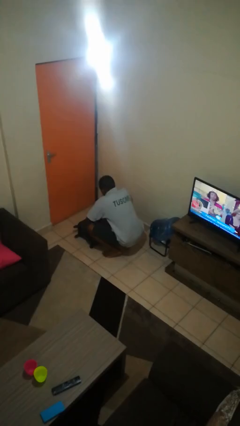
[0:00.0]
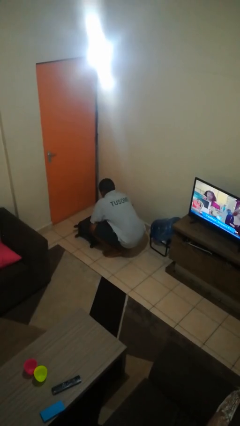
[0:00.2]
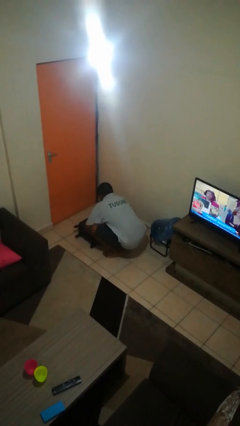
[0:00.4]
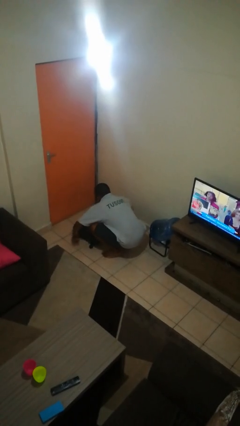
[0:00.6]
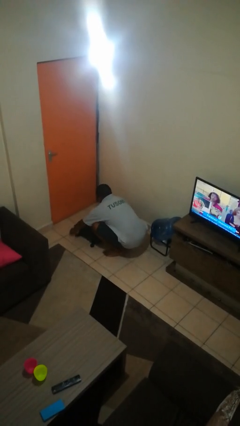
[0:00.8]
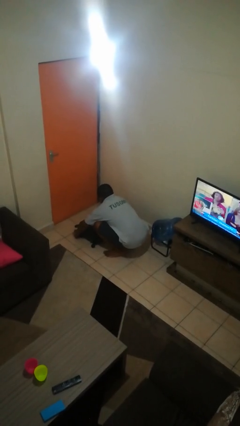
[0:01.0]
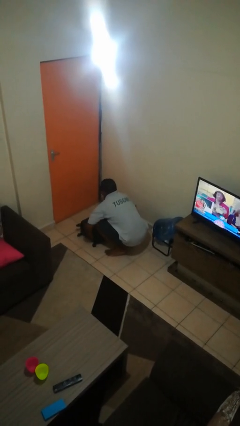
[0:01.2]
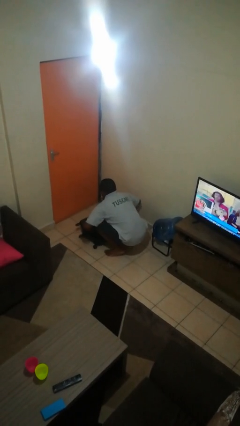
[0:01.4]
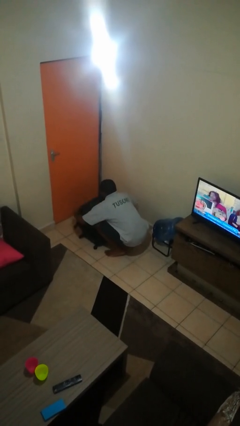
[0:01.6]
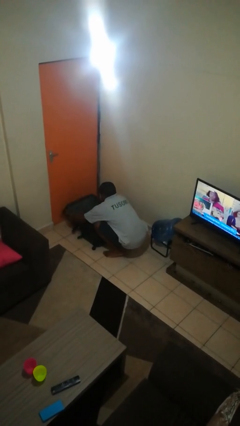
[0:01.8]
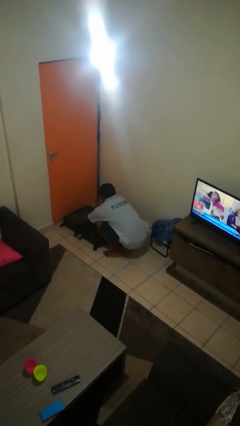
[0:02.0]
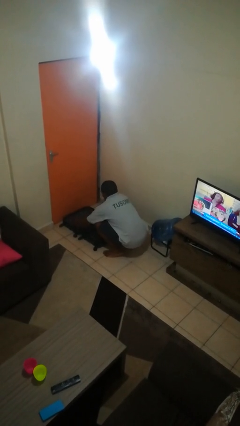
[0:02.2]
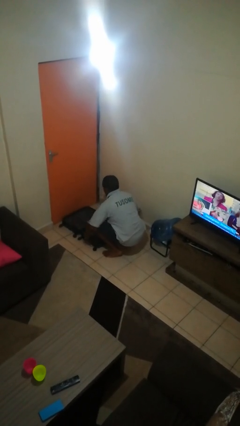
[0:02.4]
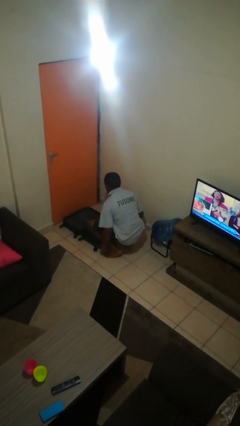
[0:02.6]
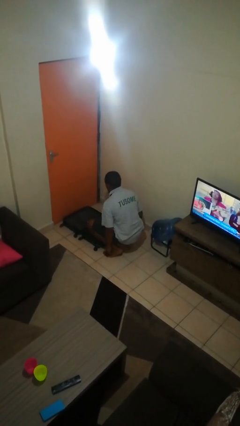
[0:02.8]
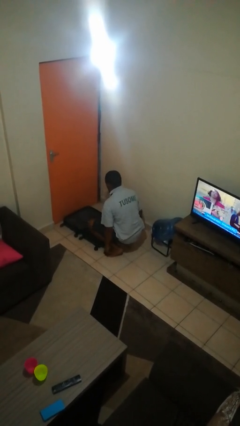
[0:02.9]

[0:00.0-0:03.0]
person opens suitcase

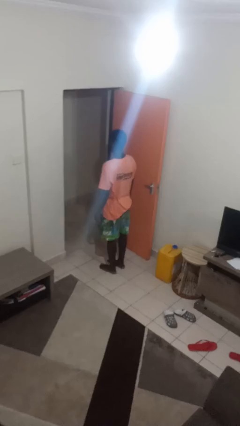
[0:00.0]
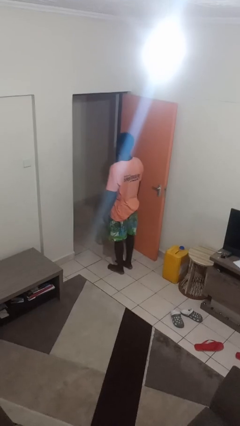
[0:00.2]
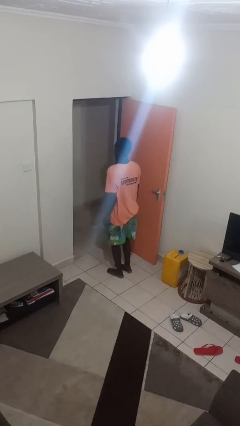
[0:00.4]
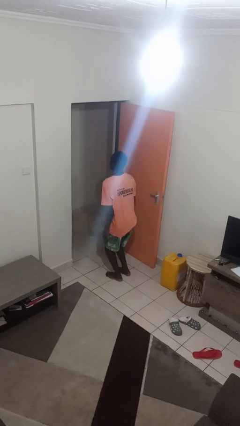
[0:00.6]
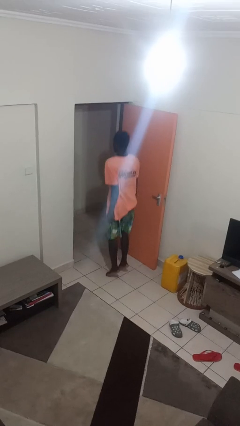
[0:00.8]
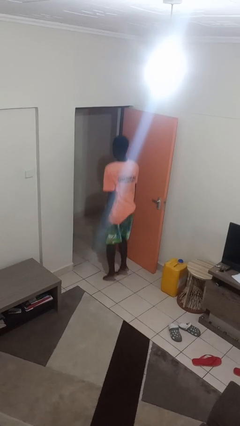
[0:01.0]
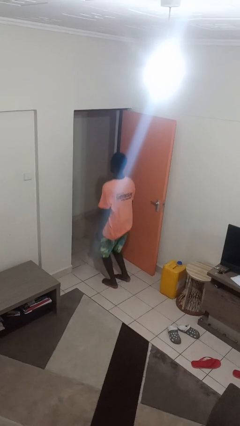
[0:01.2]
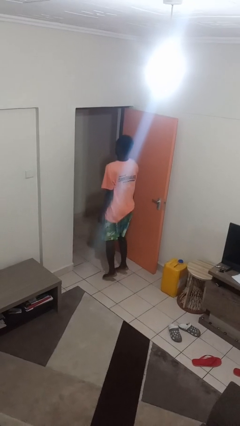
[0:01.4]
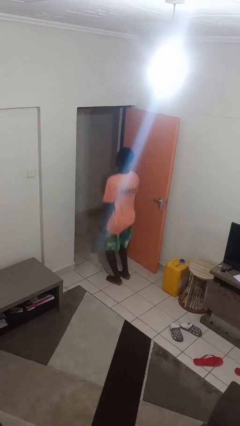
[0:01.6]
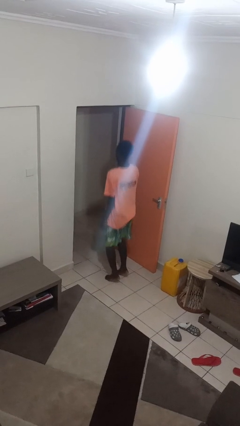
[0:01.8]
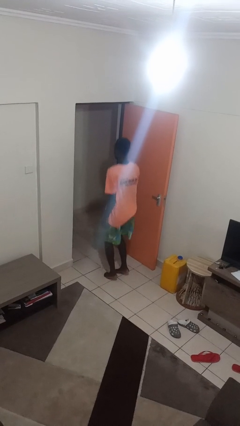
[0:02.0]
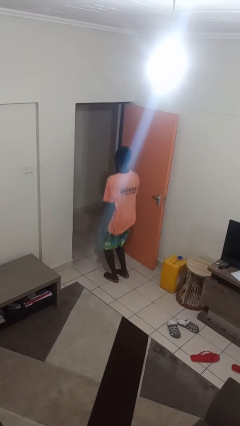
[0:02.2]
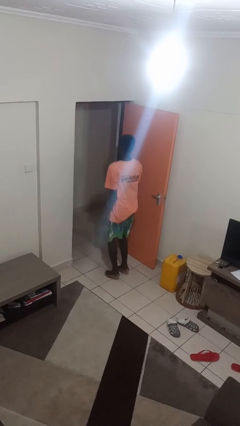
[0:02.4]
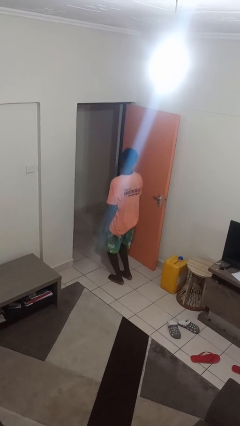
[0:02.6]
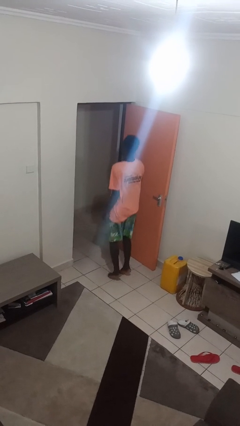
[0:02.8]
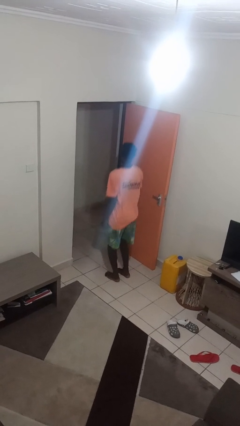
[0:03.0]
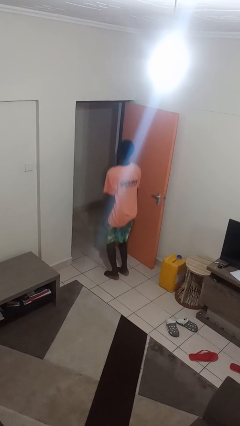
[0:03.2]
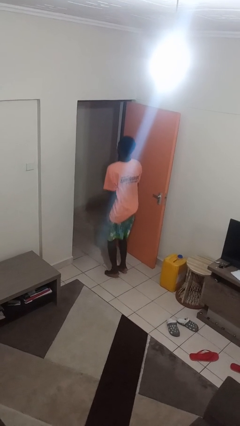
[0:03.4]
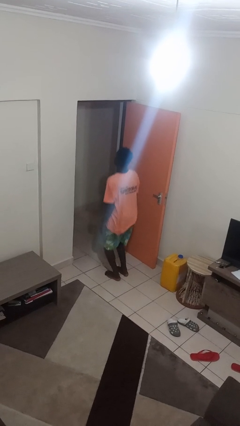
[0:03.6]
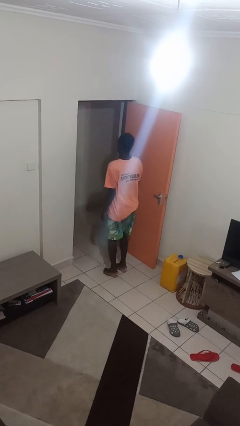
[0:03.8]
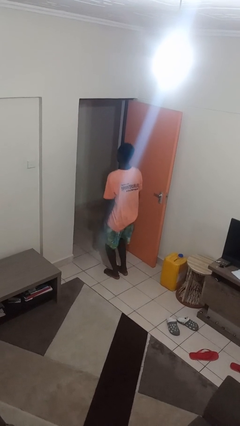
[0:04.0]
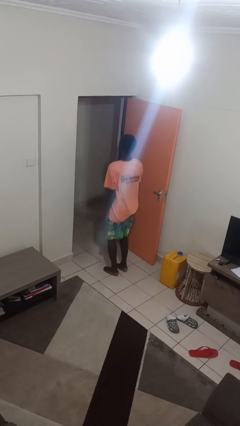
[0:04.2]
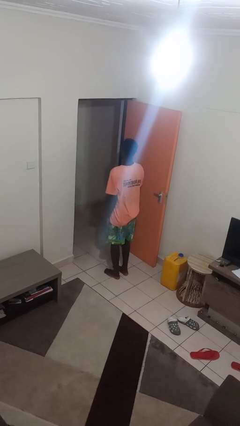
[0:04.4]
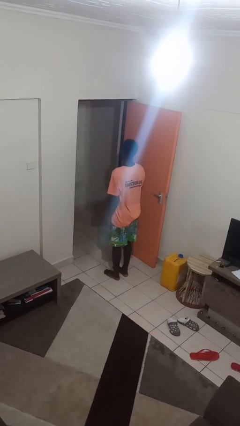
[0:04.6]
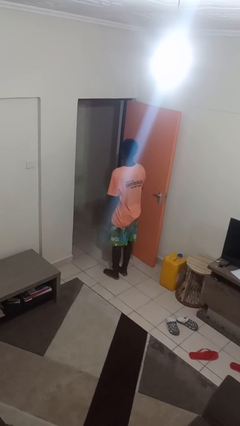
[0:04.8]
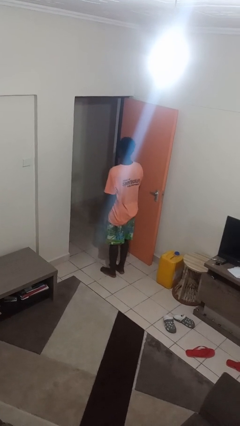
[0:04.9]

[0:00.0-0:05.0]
person jumps

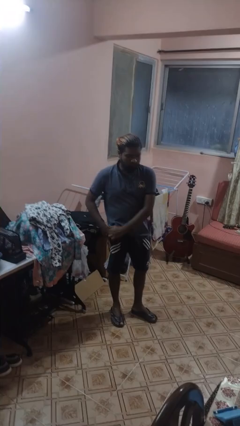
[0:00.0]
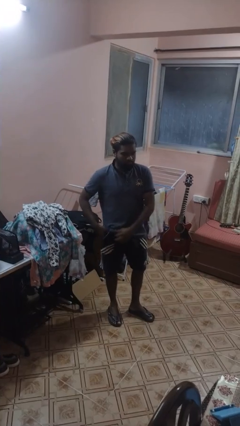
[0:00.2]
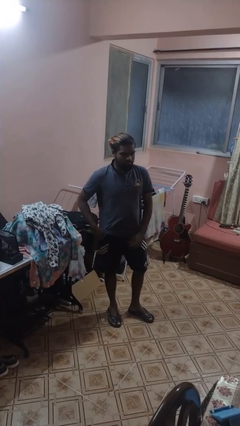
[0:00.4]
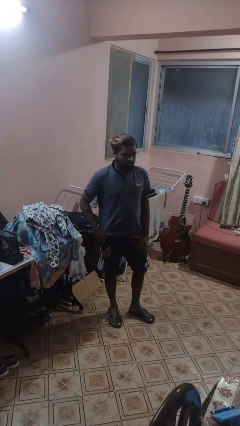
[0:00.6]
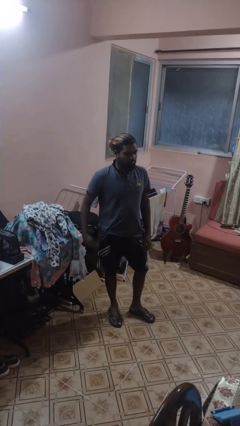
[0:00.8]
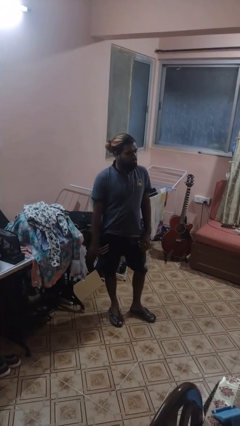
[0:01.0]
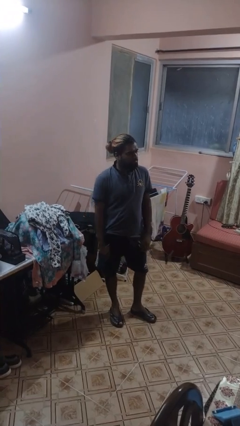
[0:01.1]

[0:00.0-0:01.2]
person puts phone into pocket

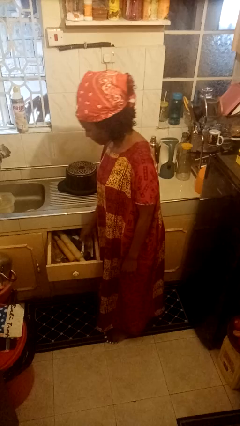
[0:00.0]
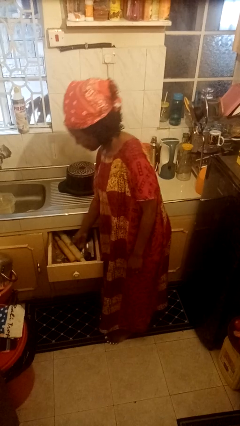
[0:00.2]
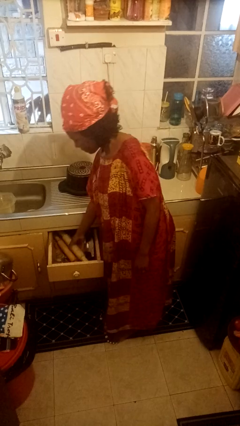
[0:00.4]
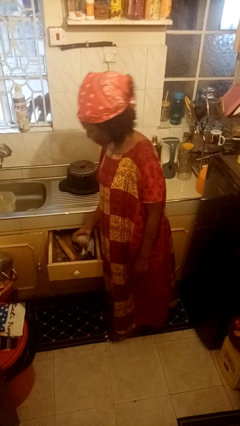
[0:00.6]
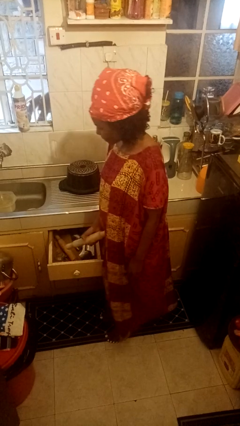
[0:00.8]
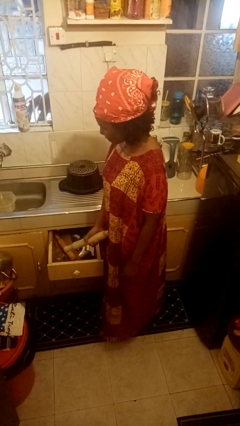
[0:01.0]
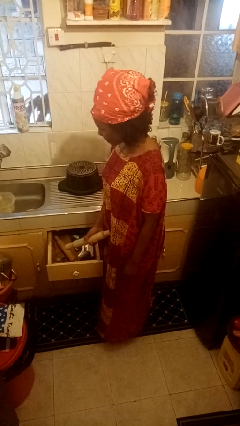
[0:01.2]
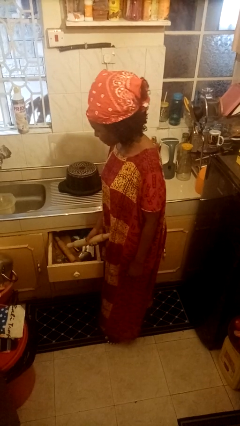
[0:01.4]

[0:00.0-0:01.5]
person takes object from kitchen drawer

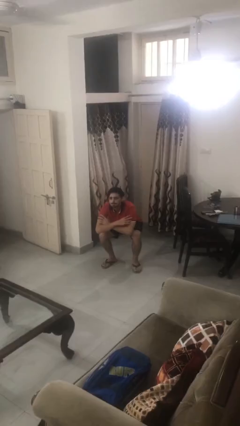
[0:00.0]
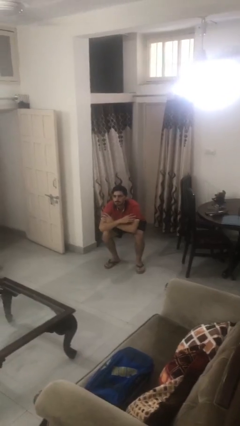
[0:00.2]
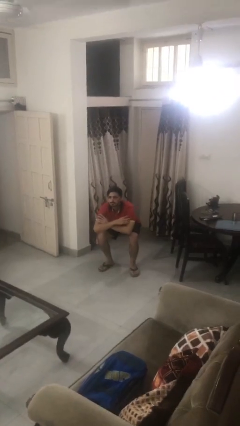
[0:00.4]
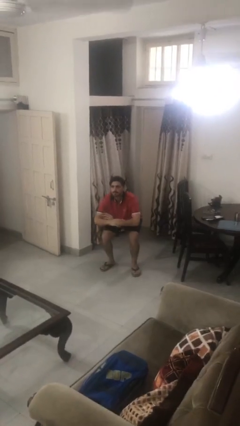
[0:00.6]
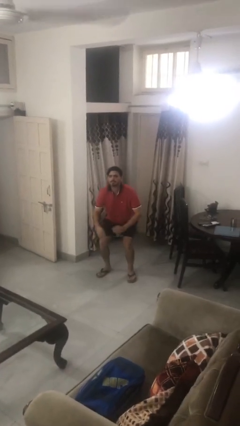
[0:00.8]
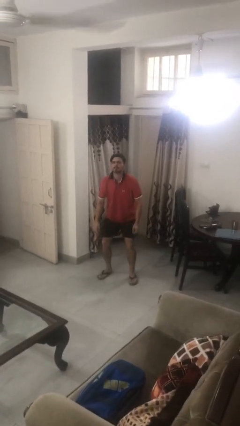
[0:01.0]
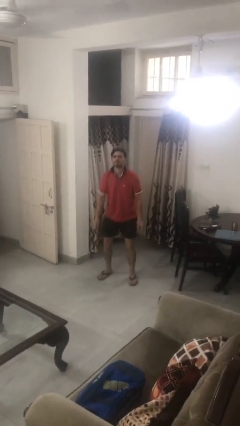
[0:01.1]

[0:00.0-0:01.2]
person stands up

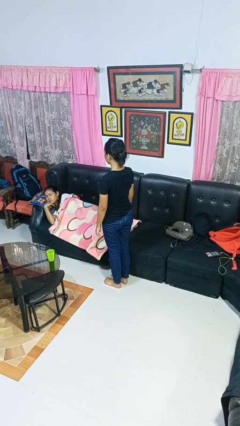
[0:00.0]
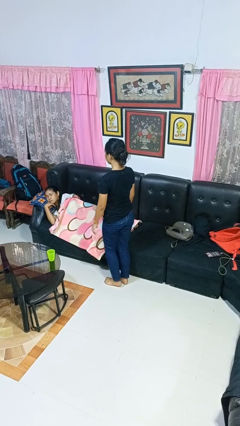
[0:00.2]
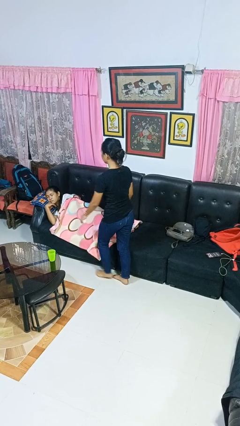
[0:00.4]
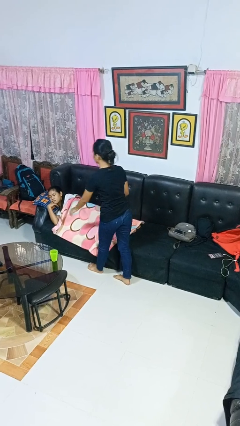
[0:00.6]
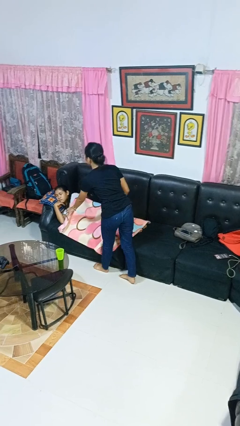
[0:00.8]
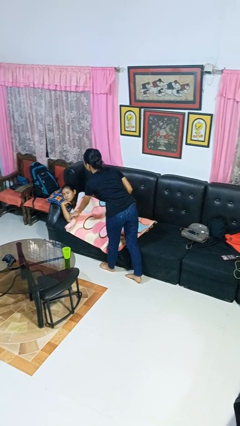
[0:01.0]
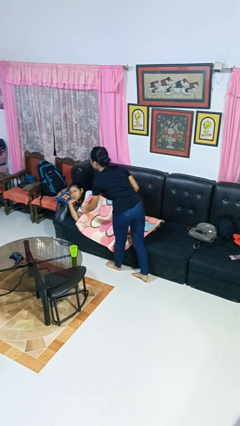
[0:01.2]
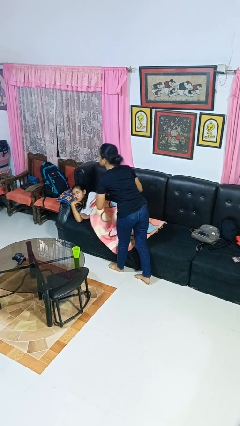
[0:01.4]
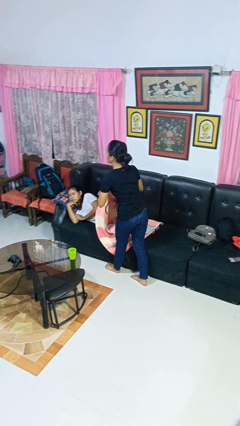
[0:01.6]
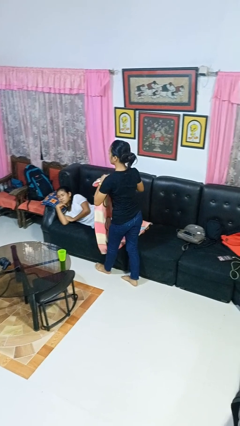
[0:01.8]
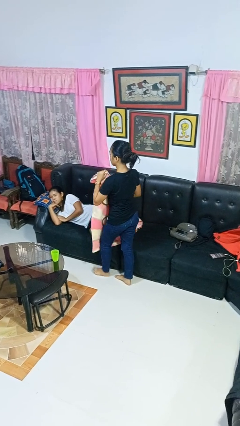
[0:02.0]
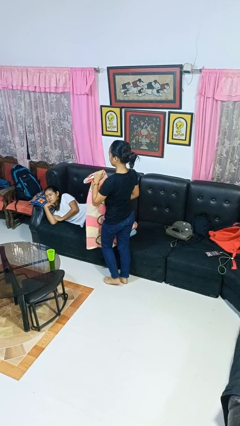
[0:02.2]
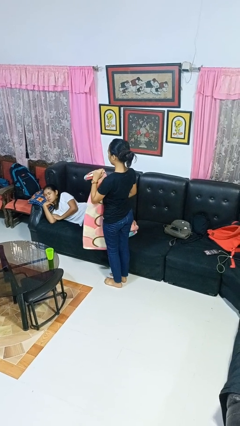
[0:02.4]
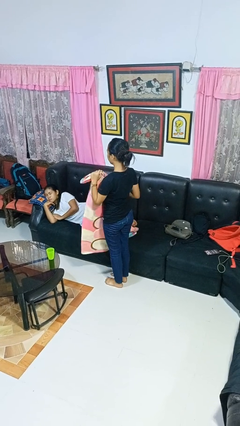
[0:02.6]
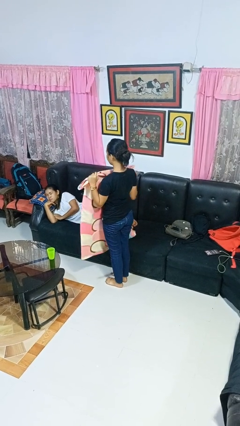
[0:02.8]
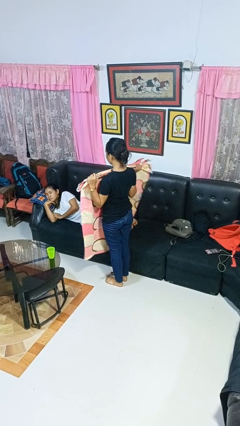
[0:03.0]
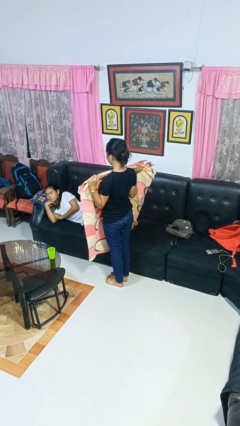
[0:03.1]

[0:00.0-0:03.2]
person uncovers friend with blanket

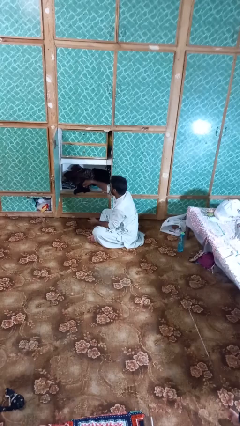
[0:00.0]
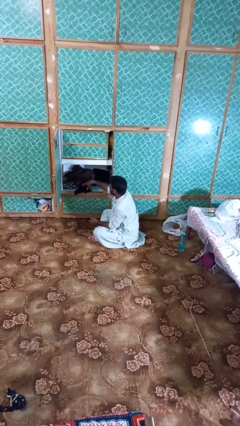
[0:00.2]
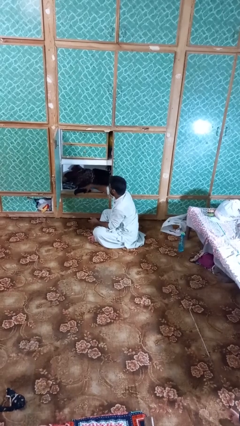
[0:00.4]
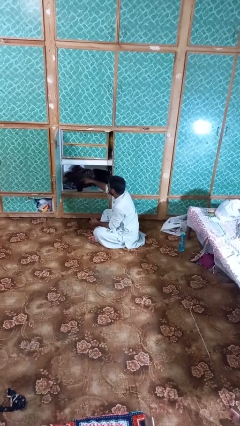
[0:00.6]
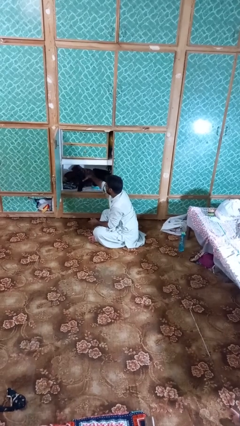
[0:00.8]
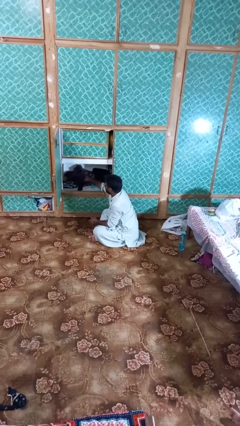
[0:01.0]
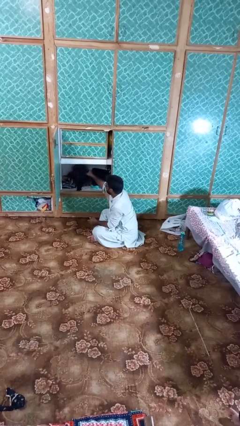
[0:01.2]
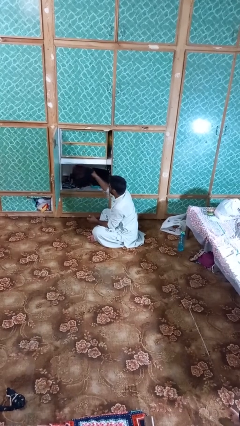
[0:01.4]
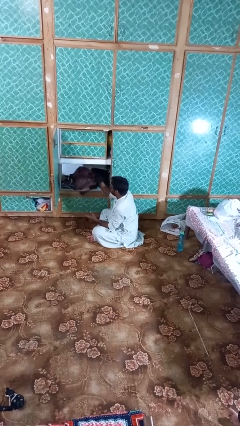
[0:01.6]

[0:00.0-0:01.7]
person takes clothes from dresser
